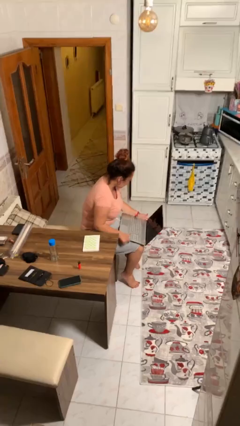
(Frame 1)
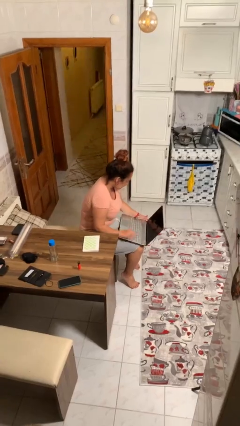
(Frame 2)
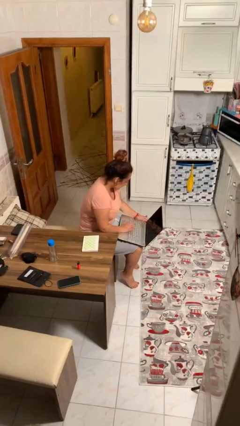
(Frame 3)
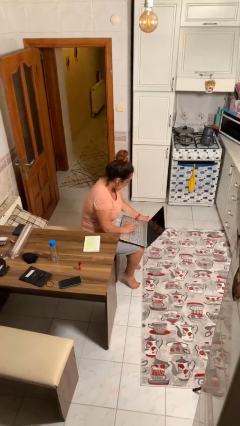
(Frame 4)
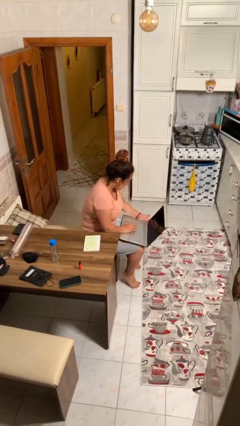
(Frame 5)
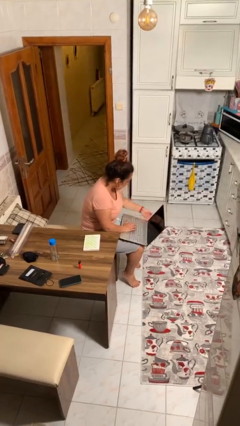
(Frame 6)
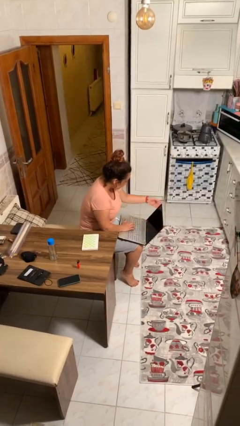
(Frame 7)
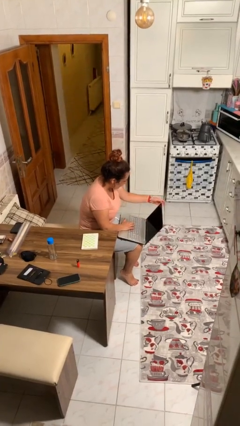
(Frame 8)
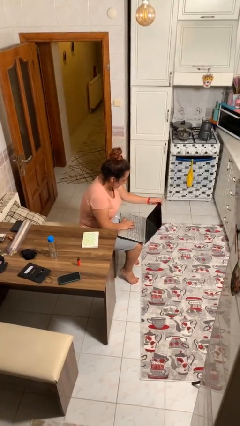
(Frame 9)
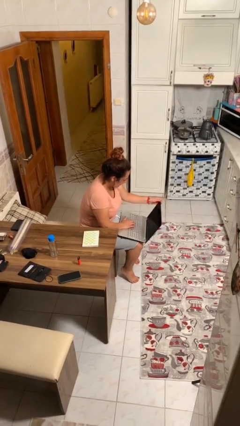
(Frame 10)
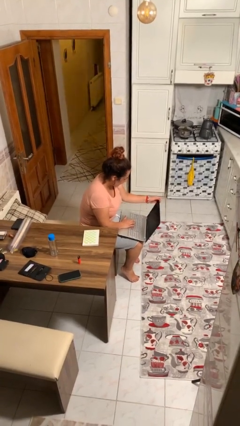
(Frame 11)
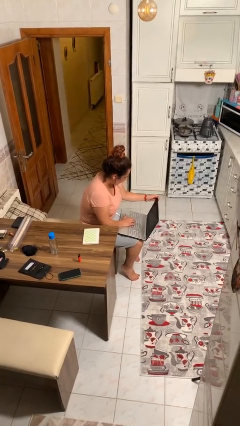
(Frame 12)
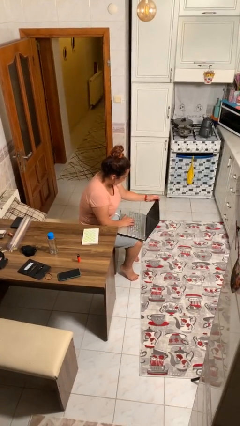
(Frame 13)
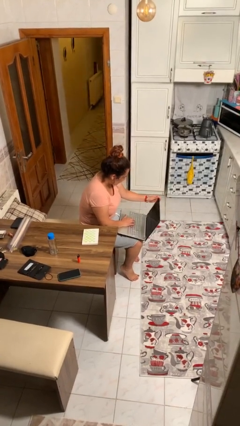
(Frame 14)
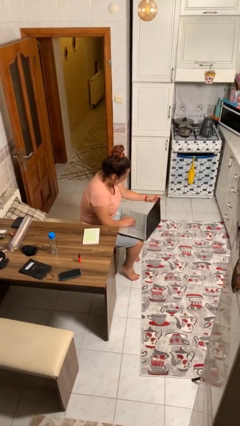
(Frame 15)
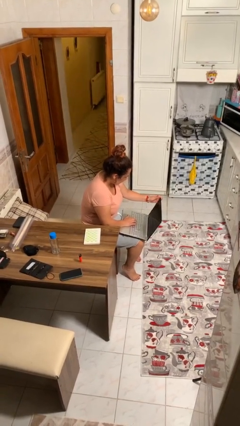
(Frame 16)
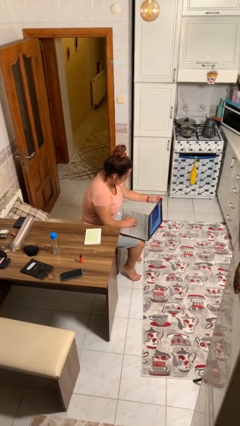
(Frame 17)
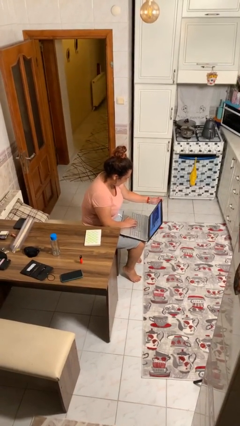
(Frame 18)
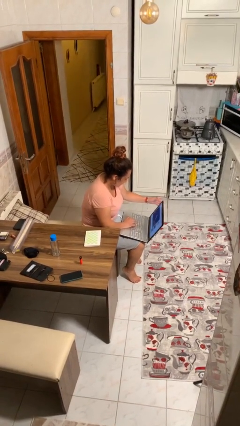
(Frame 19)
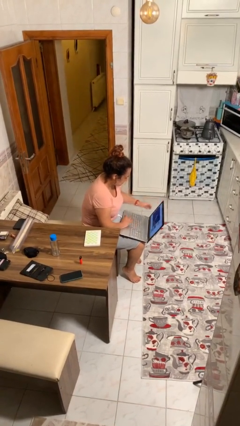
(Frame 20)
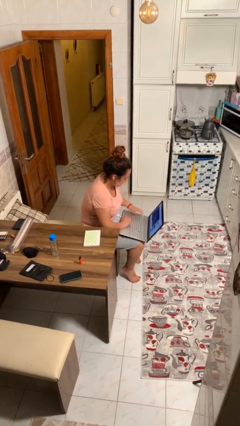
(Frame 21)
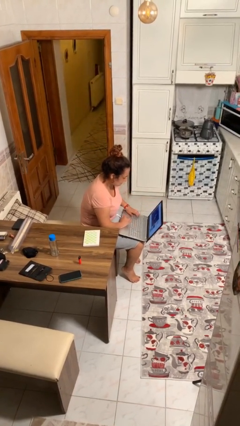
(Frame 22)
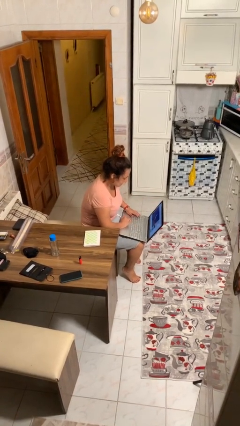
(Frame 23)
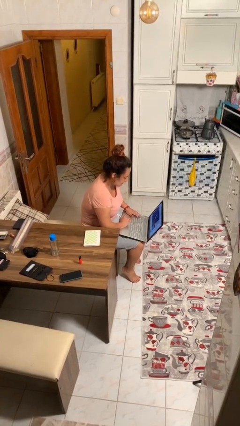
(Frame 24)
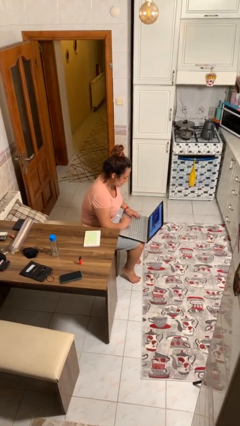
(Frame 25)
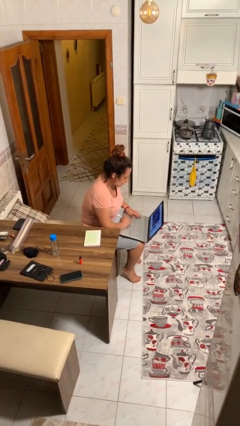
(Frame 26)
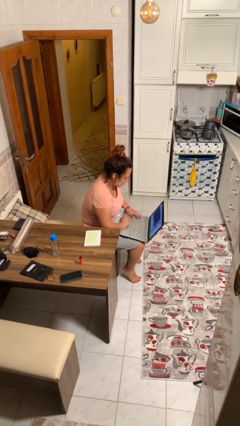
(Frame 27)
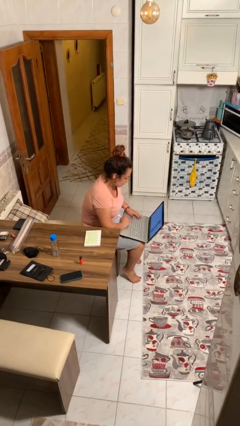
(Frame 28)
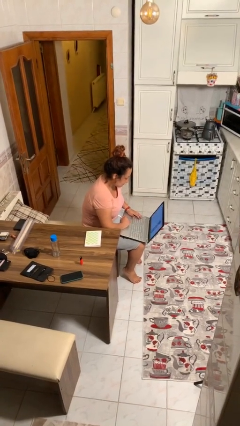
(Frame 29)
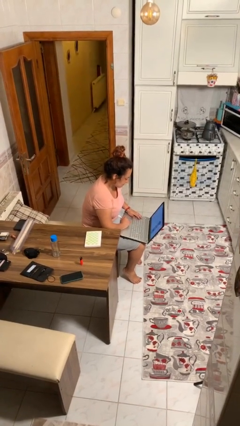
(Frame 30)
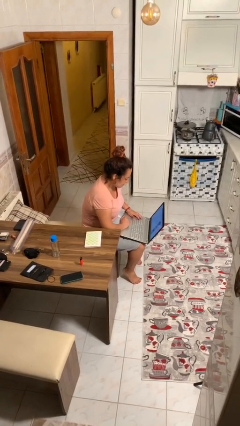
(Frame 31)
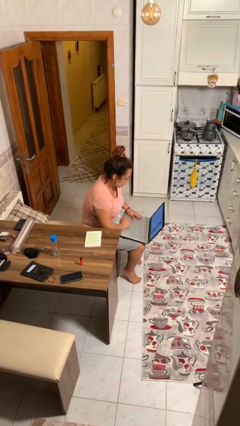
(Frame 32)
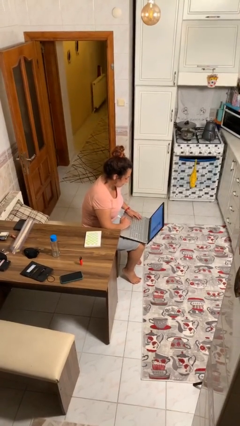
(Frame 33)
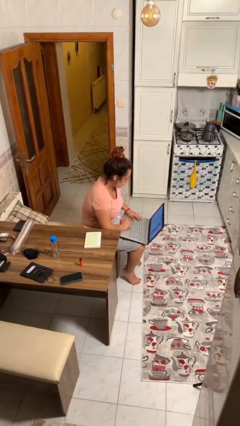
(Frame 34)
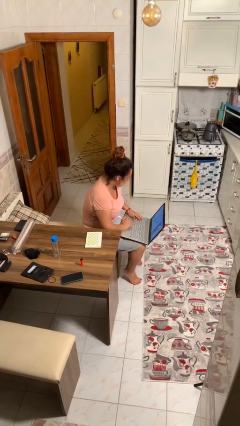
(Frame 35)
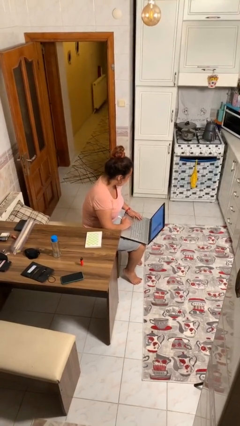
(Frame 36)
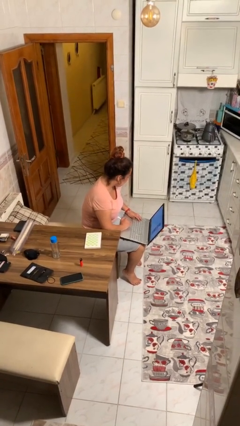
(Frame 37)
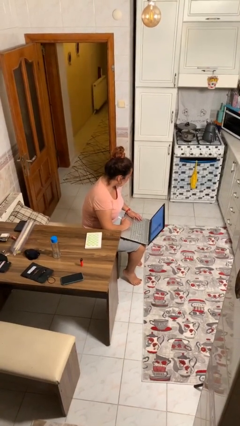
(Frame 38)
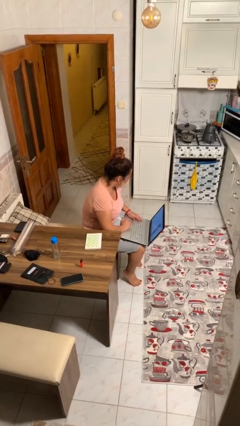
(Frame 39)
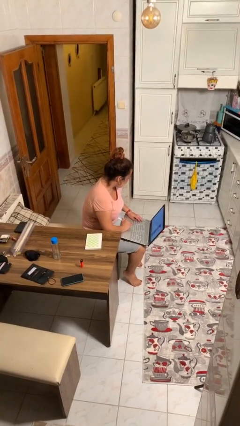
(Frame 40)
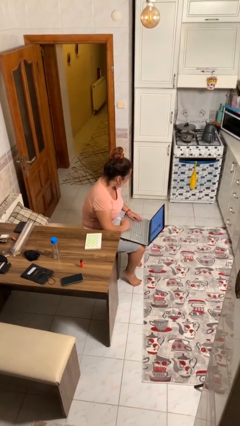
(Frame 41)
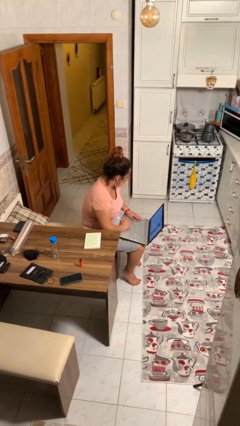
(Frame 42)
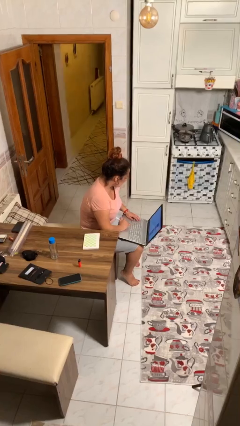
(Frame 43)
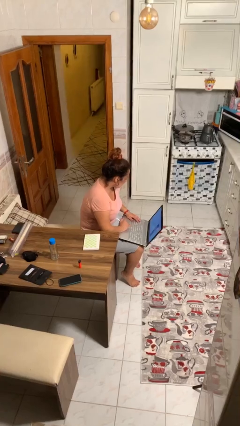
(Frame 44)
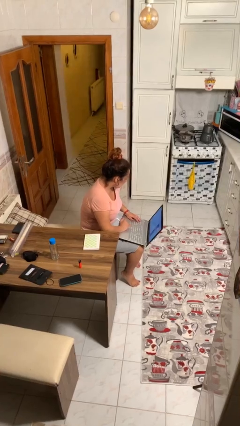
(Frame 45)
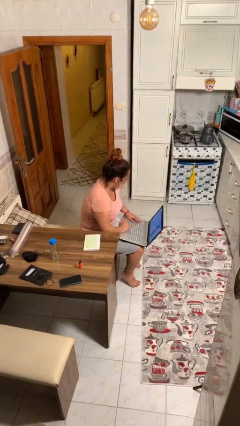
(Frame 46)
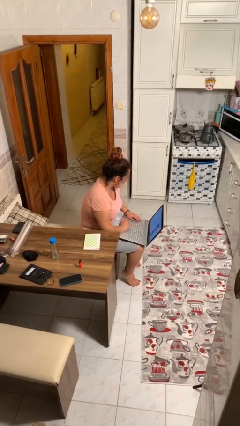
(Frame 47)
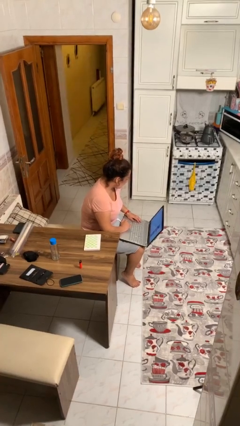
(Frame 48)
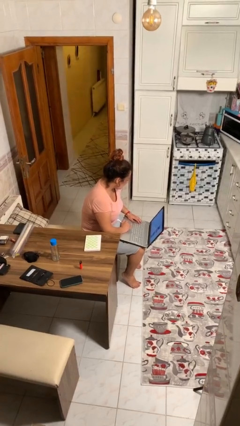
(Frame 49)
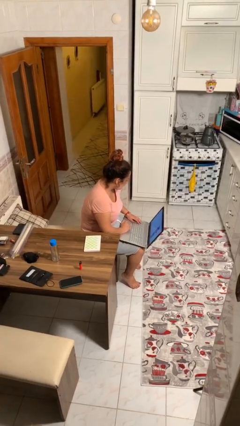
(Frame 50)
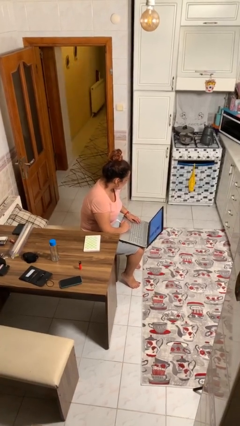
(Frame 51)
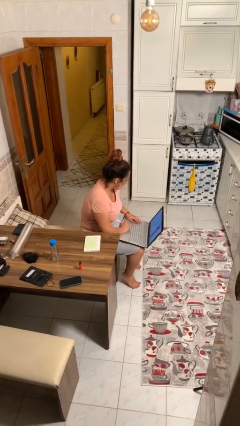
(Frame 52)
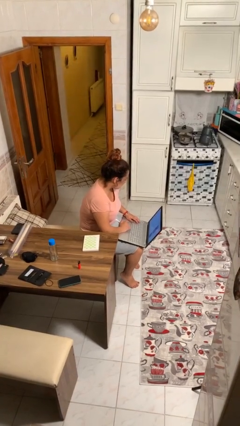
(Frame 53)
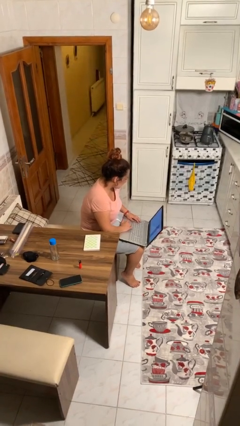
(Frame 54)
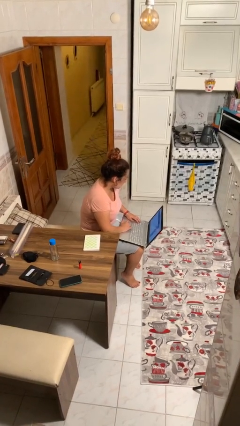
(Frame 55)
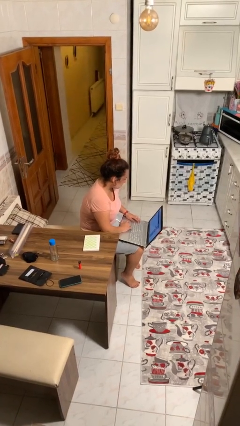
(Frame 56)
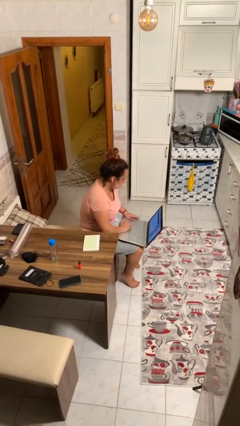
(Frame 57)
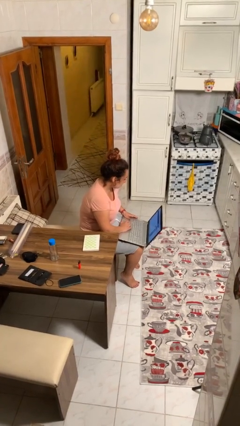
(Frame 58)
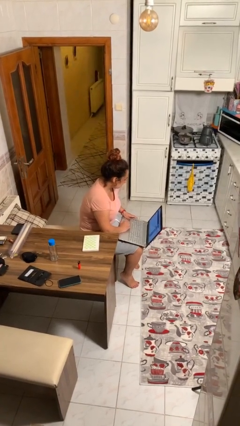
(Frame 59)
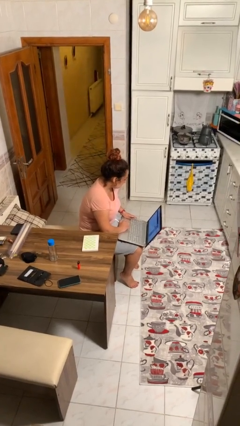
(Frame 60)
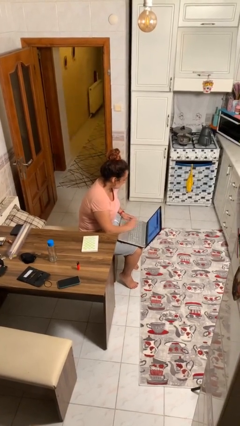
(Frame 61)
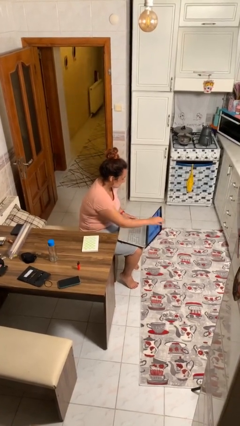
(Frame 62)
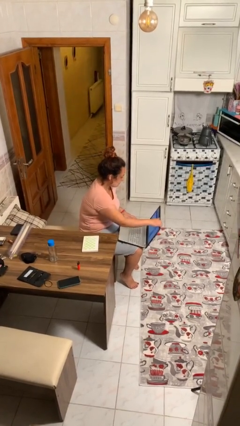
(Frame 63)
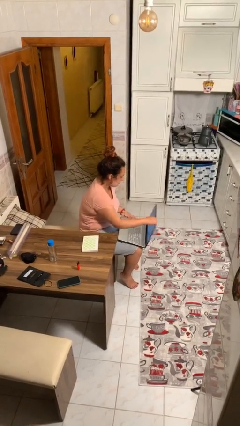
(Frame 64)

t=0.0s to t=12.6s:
person interacts with laptop

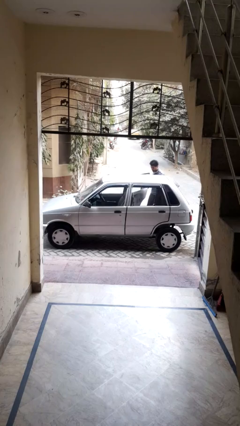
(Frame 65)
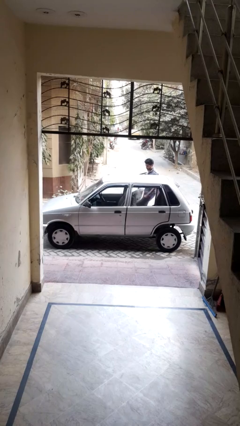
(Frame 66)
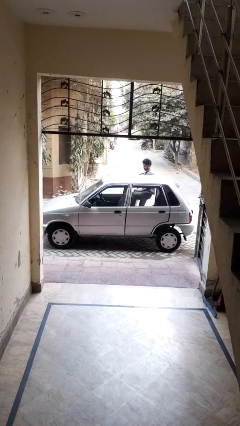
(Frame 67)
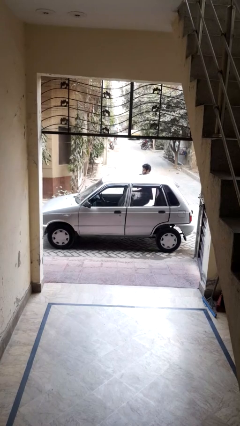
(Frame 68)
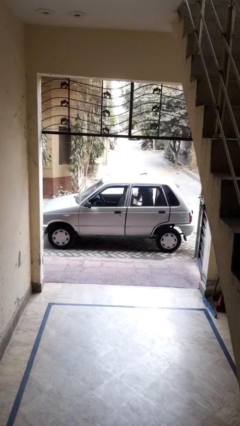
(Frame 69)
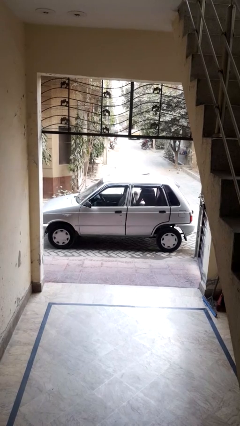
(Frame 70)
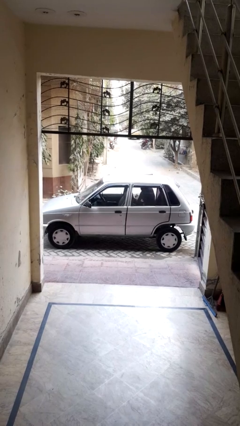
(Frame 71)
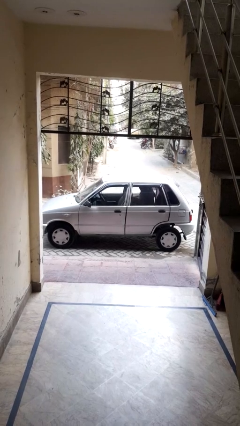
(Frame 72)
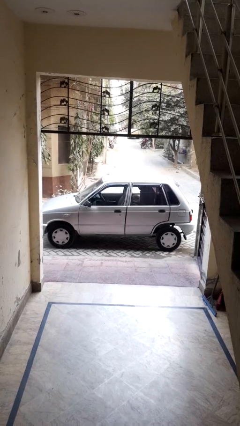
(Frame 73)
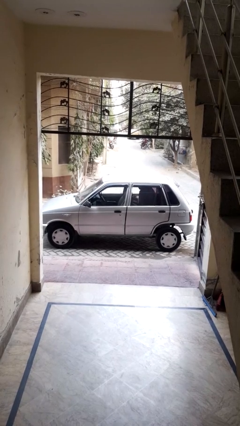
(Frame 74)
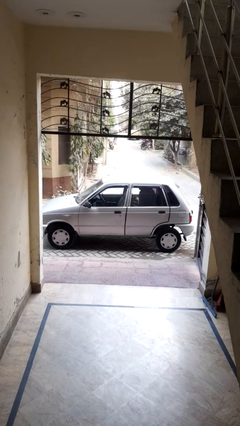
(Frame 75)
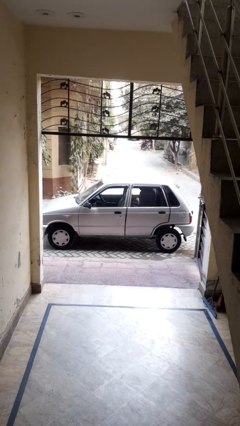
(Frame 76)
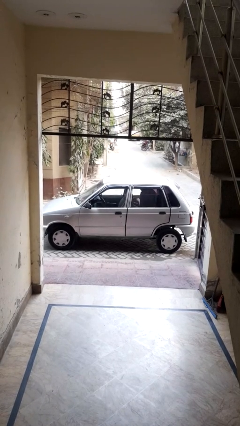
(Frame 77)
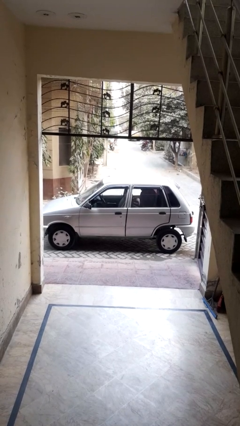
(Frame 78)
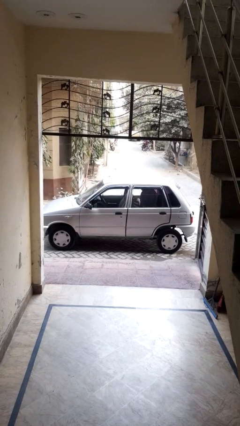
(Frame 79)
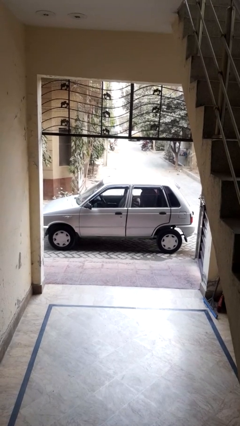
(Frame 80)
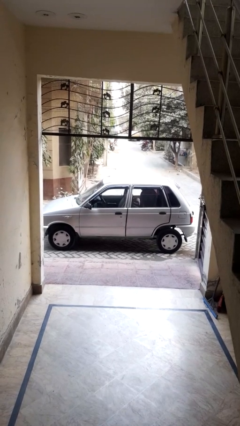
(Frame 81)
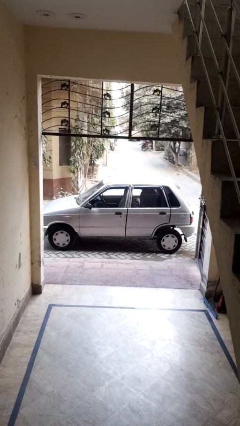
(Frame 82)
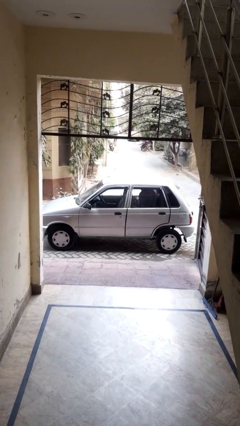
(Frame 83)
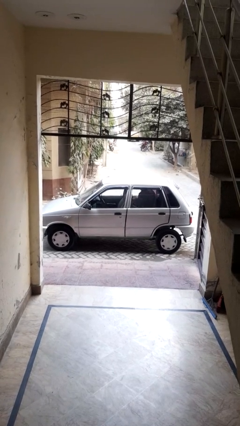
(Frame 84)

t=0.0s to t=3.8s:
car picks up person

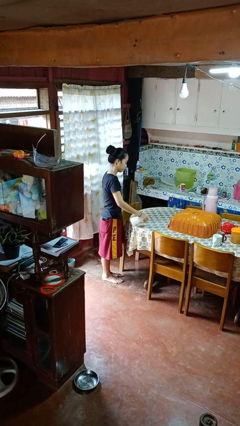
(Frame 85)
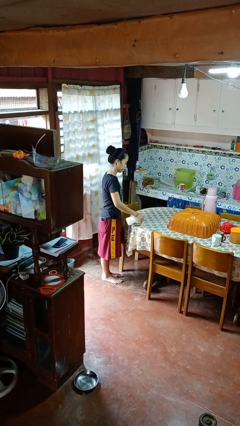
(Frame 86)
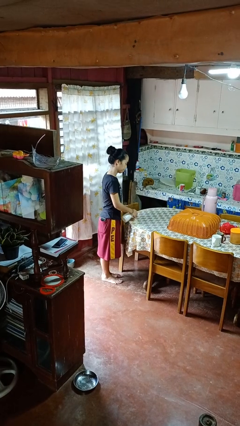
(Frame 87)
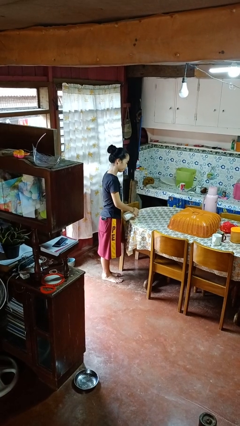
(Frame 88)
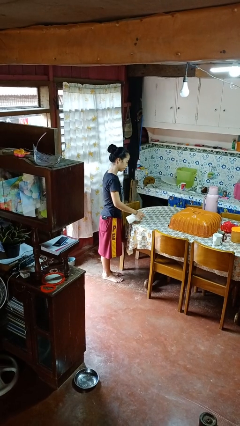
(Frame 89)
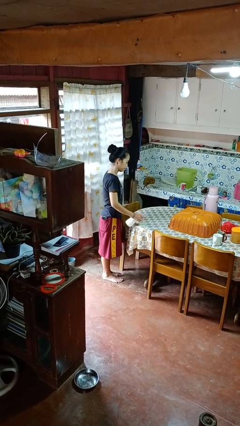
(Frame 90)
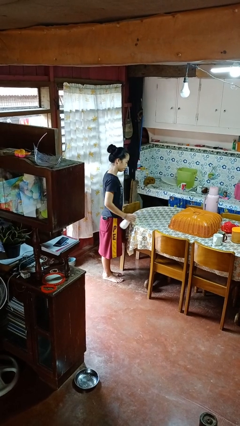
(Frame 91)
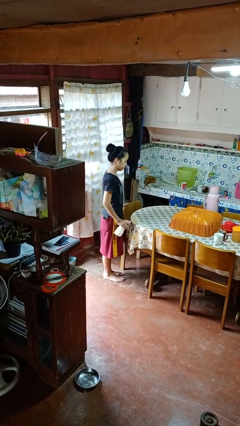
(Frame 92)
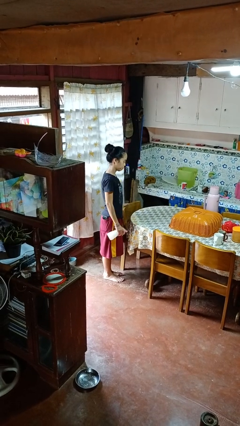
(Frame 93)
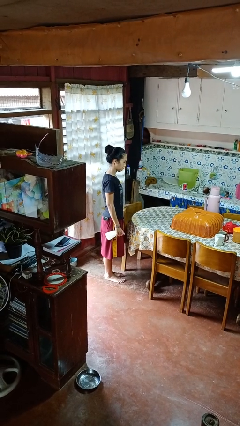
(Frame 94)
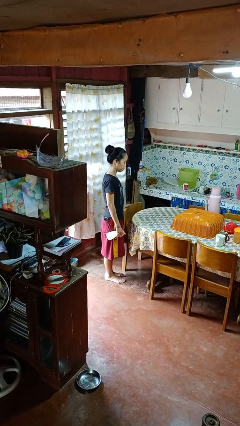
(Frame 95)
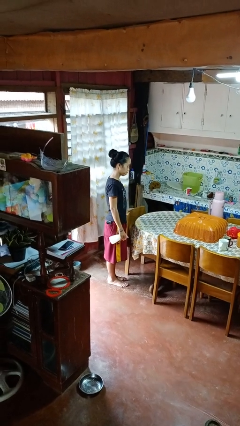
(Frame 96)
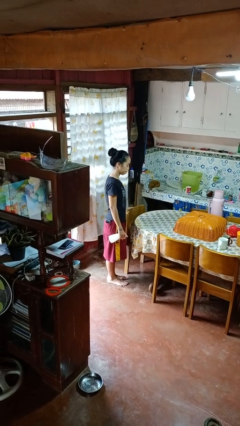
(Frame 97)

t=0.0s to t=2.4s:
person sprays from bottle
